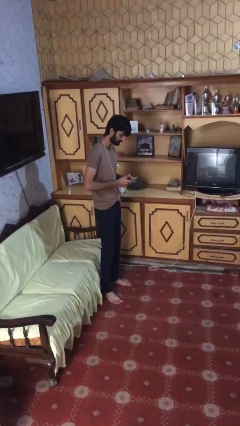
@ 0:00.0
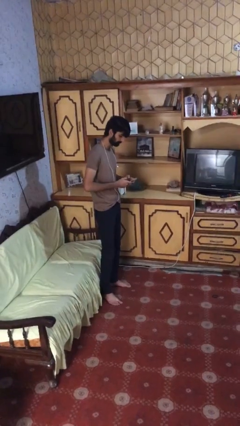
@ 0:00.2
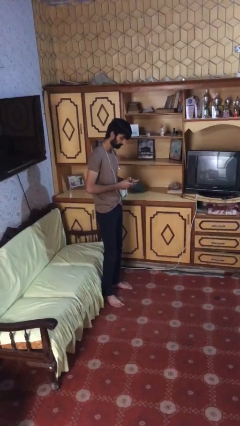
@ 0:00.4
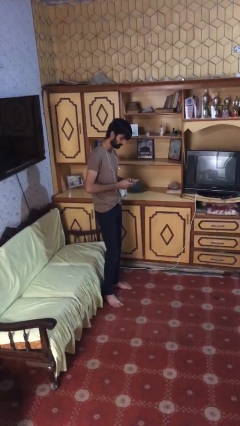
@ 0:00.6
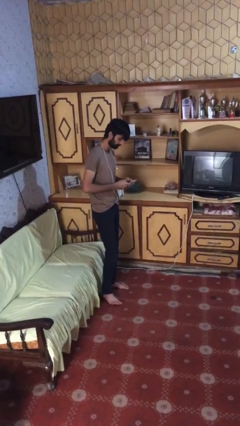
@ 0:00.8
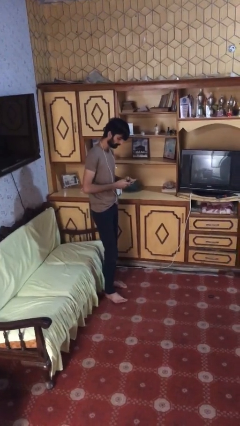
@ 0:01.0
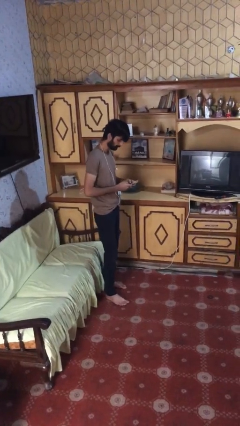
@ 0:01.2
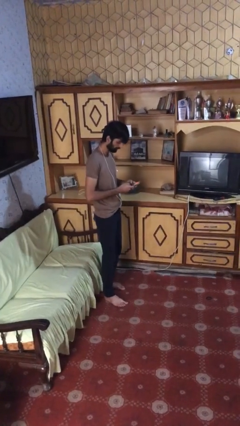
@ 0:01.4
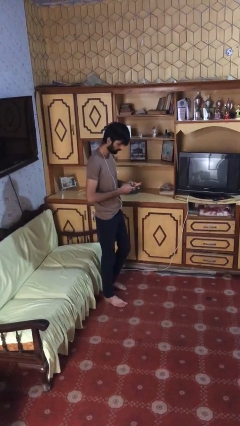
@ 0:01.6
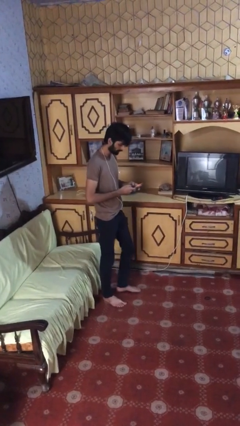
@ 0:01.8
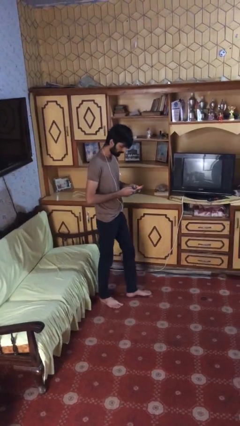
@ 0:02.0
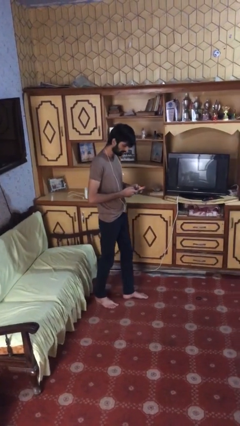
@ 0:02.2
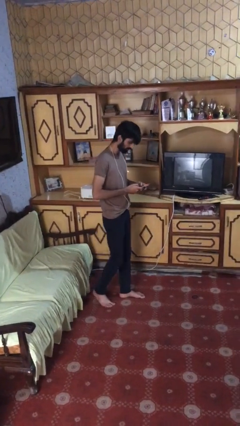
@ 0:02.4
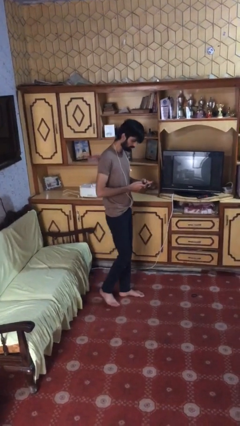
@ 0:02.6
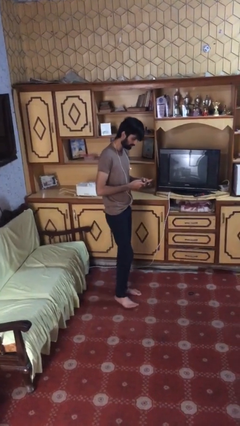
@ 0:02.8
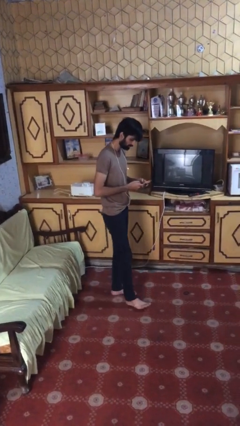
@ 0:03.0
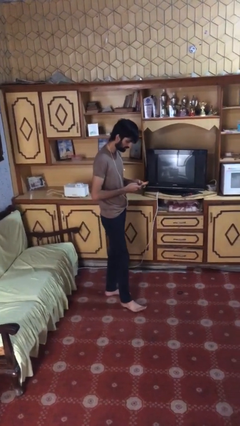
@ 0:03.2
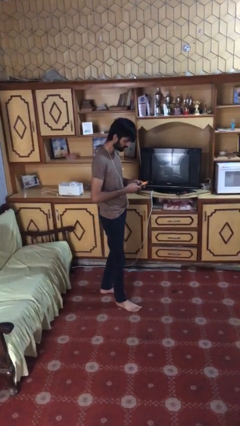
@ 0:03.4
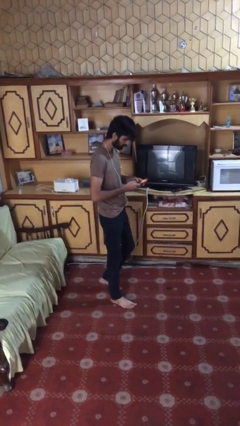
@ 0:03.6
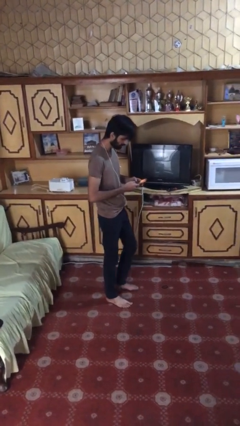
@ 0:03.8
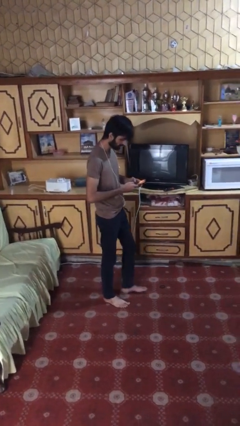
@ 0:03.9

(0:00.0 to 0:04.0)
person texts on phone

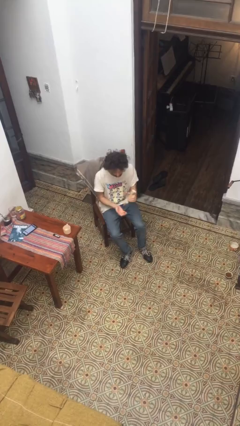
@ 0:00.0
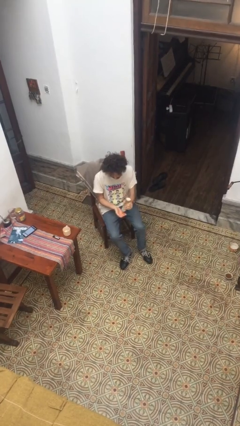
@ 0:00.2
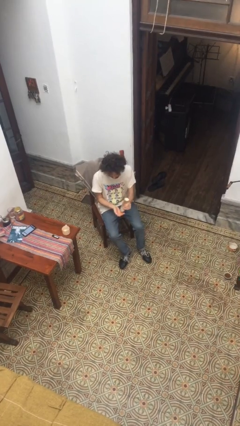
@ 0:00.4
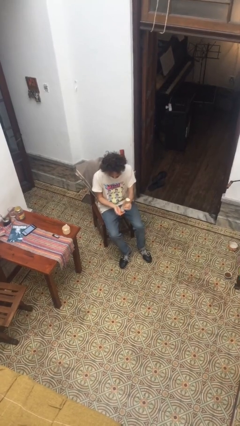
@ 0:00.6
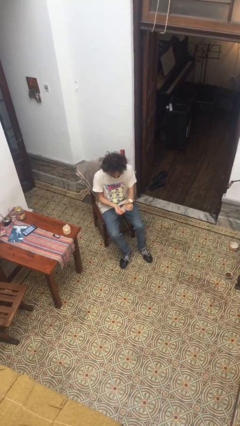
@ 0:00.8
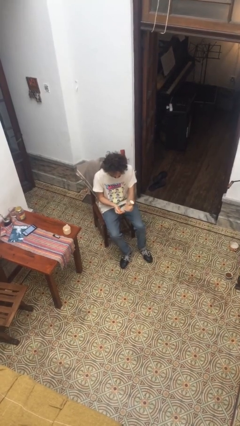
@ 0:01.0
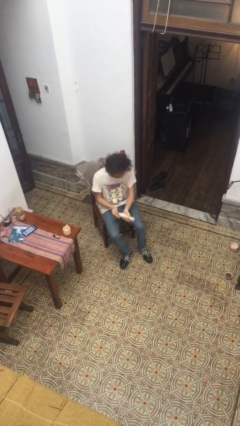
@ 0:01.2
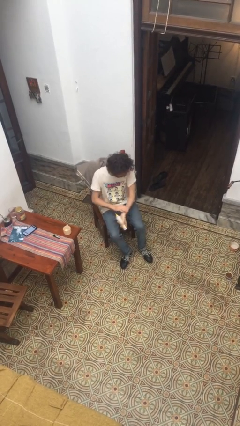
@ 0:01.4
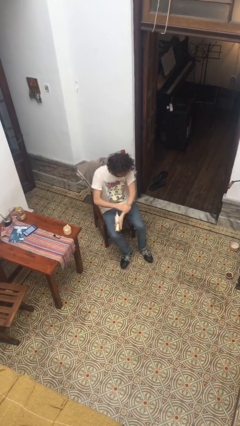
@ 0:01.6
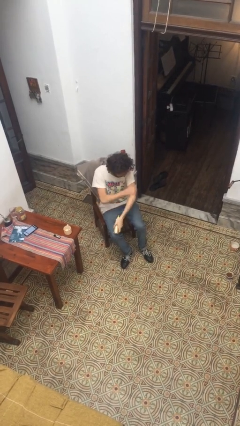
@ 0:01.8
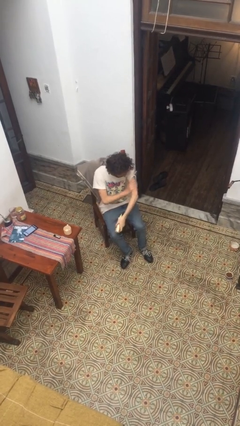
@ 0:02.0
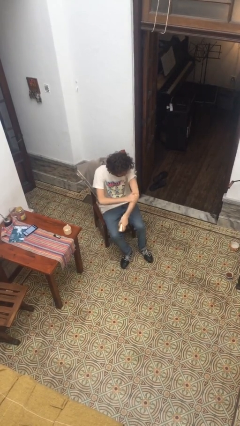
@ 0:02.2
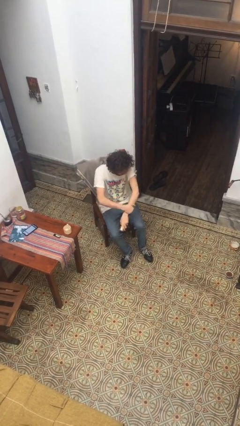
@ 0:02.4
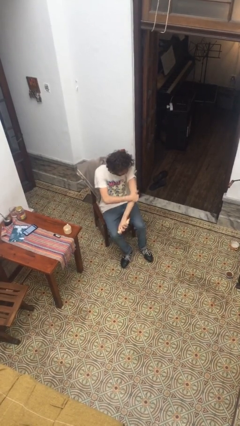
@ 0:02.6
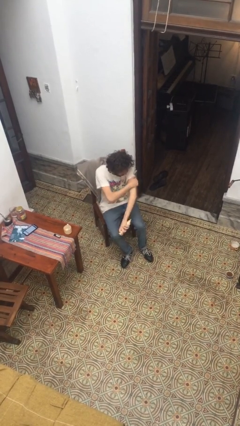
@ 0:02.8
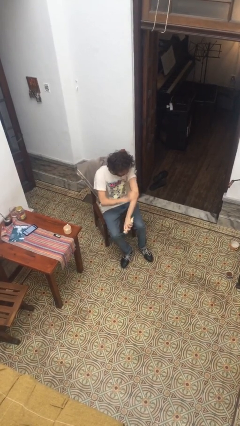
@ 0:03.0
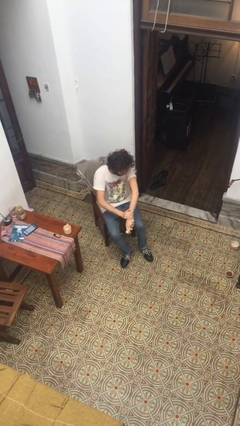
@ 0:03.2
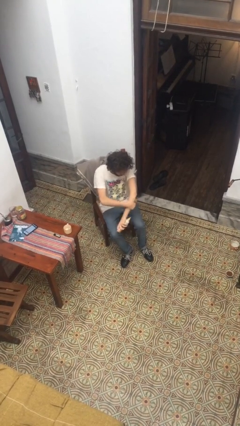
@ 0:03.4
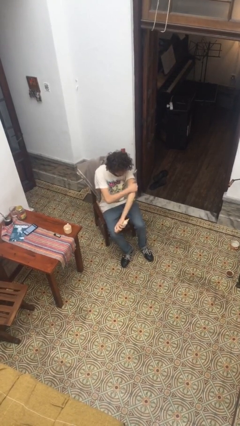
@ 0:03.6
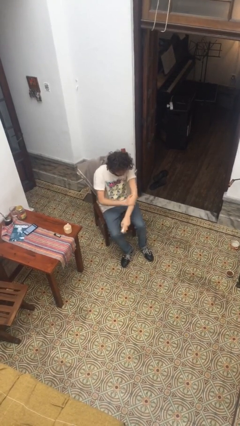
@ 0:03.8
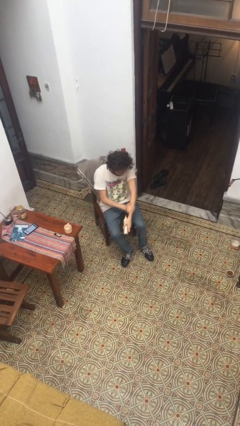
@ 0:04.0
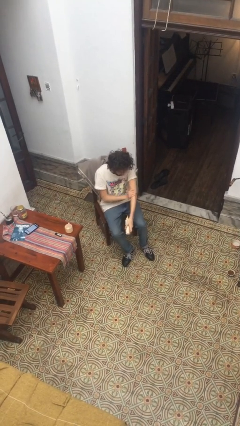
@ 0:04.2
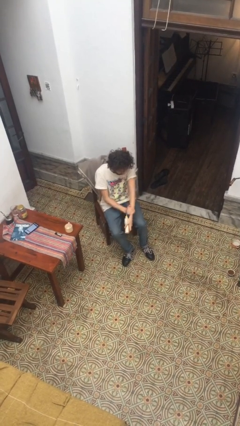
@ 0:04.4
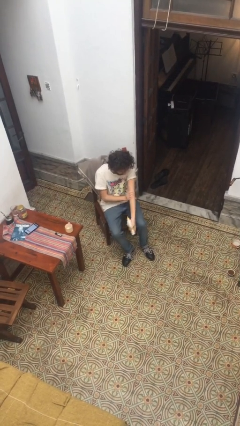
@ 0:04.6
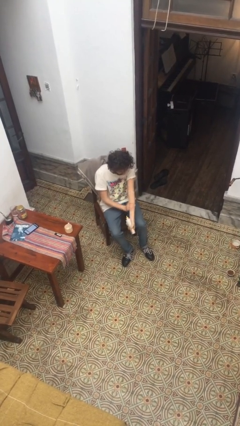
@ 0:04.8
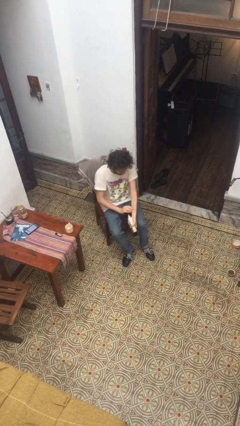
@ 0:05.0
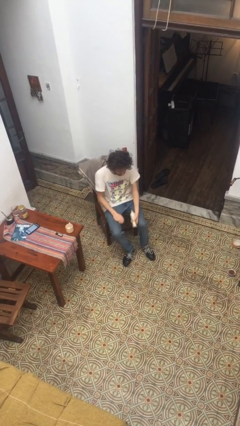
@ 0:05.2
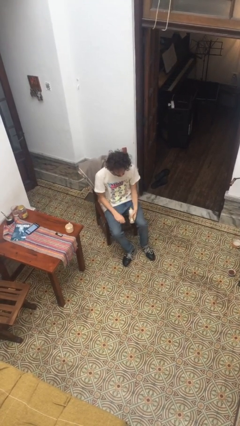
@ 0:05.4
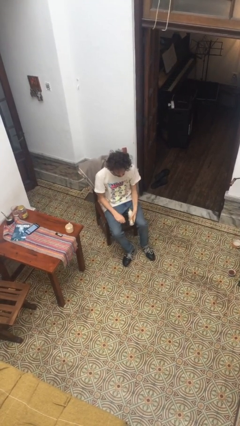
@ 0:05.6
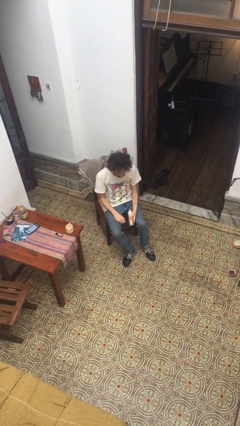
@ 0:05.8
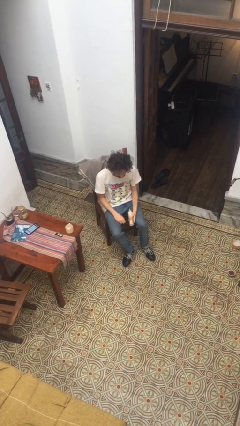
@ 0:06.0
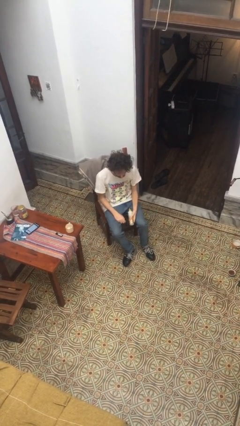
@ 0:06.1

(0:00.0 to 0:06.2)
person applies sunscreen

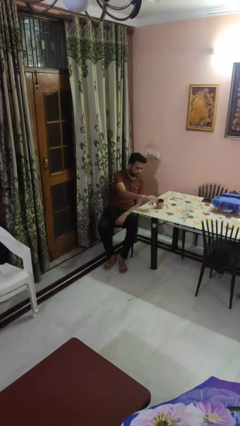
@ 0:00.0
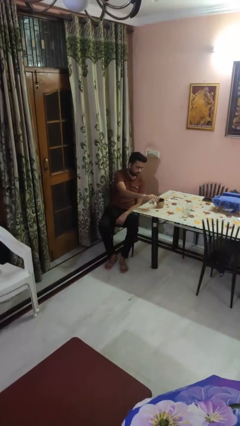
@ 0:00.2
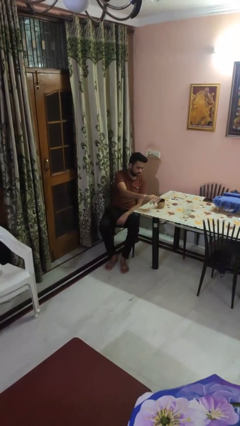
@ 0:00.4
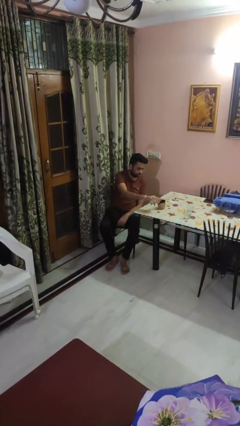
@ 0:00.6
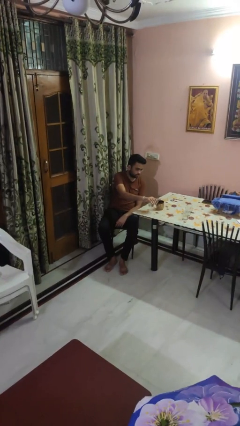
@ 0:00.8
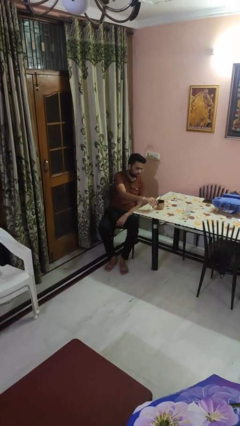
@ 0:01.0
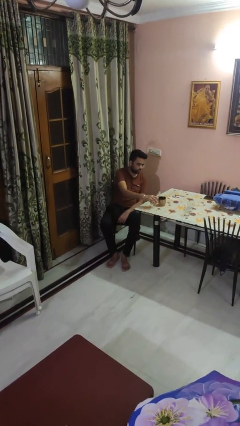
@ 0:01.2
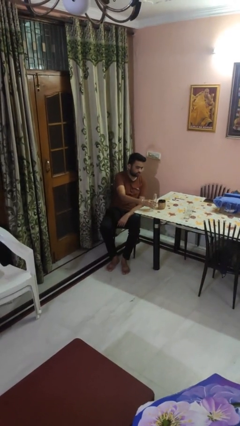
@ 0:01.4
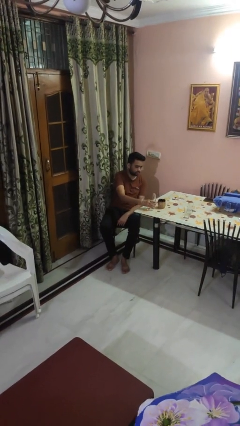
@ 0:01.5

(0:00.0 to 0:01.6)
person pours liquid into cup

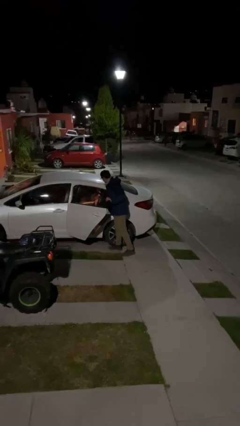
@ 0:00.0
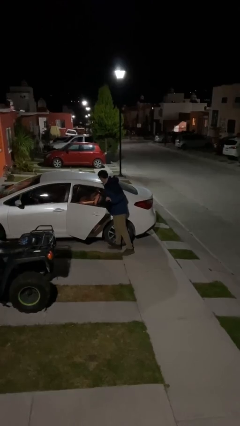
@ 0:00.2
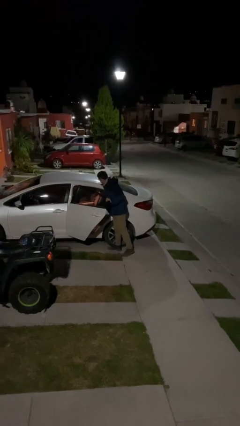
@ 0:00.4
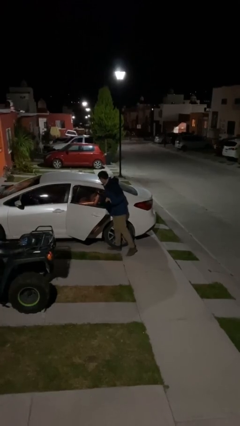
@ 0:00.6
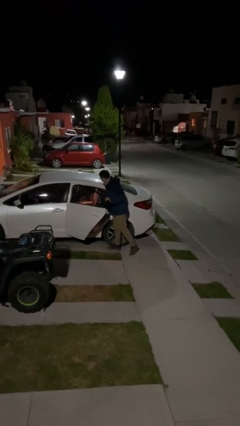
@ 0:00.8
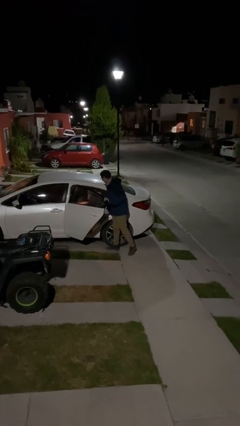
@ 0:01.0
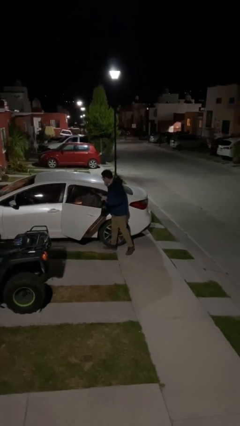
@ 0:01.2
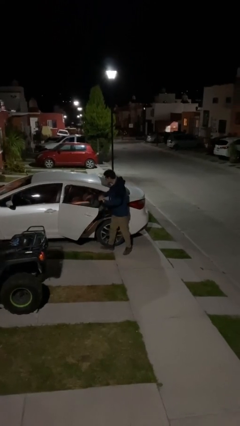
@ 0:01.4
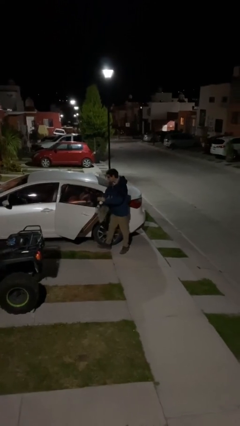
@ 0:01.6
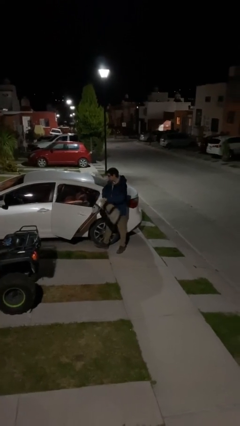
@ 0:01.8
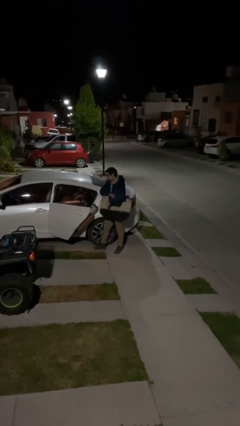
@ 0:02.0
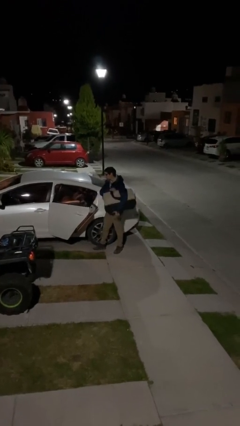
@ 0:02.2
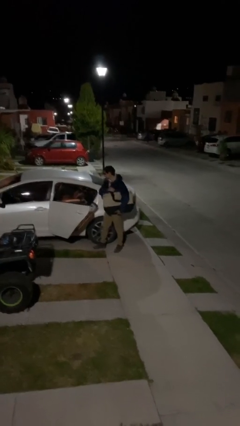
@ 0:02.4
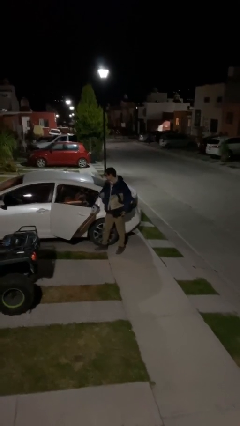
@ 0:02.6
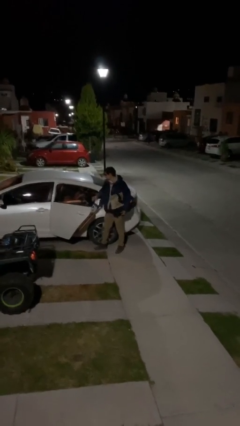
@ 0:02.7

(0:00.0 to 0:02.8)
person unloads car

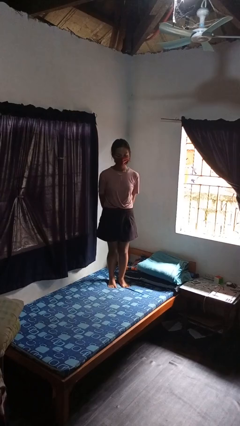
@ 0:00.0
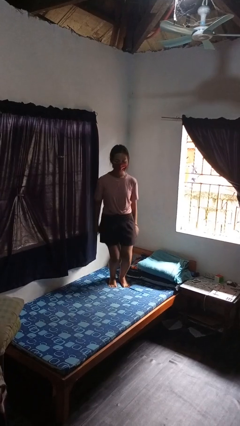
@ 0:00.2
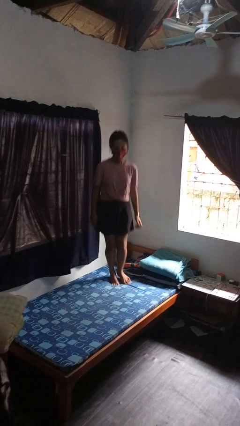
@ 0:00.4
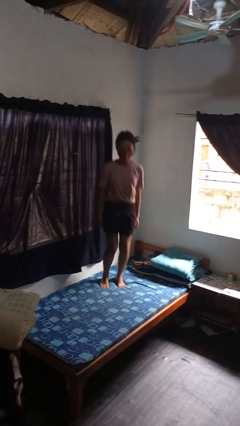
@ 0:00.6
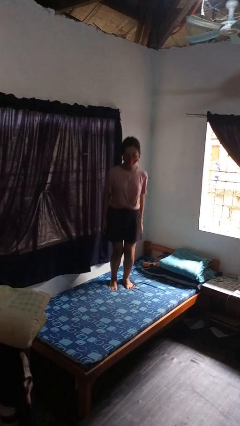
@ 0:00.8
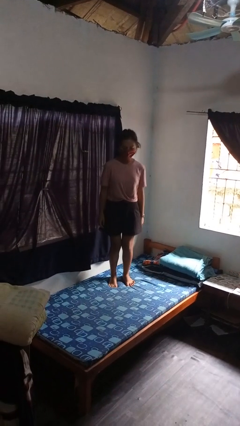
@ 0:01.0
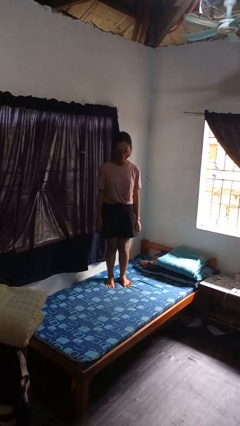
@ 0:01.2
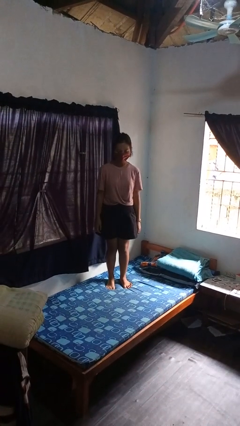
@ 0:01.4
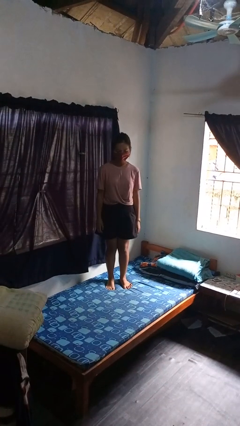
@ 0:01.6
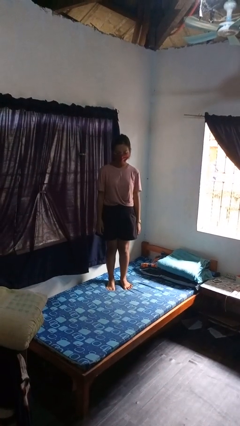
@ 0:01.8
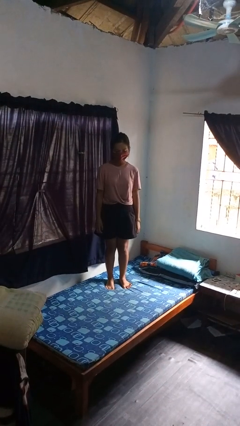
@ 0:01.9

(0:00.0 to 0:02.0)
person jumps on bed

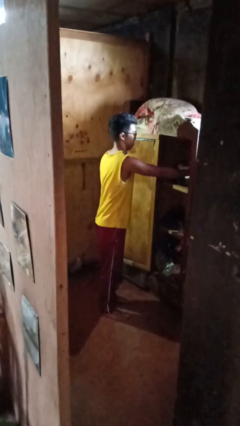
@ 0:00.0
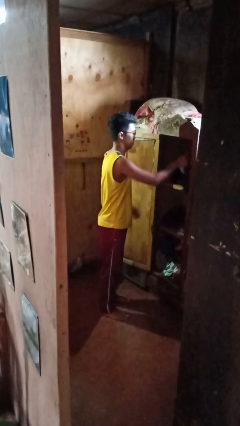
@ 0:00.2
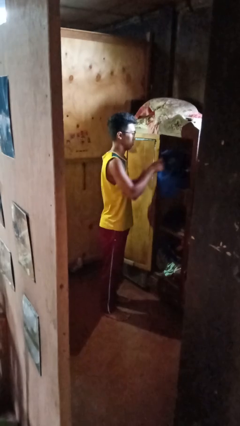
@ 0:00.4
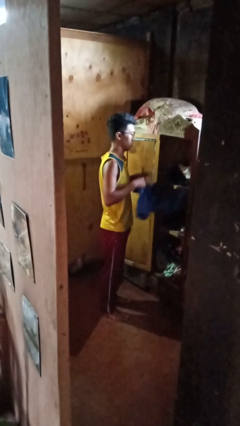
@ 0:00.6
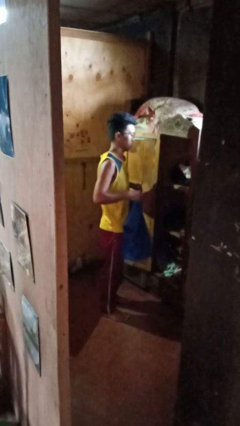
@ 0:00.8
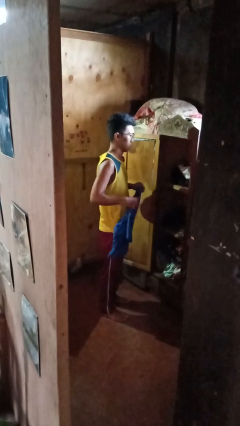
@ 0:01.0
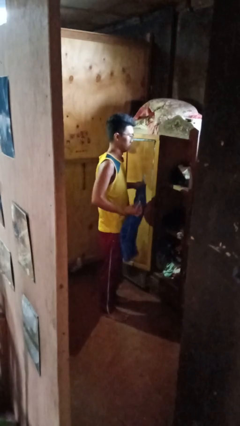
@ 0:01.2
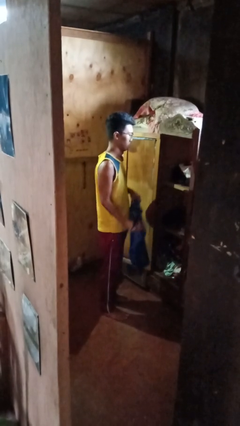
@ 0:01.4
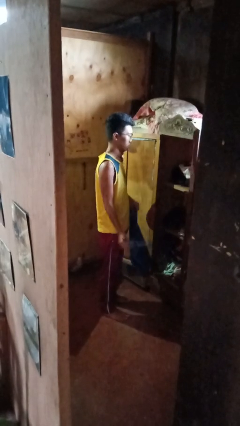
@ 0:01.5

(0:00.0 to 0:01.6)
person takes clothes from closet
